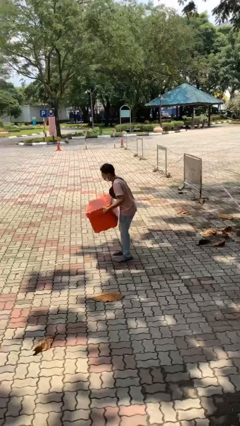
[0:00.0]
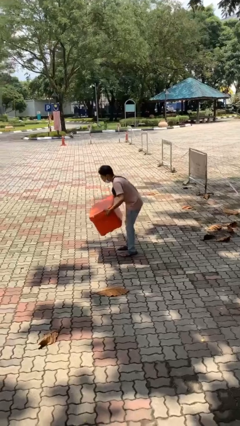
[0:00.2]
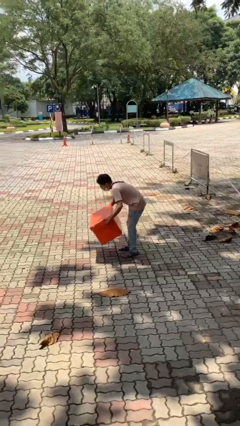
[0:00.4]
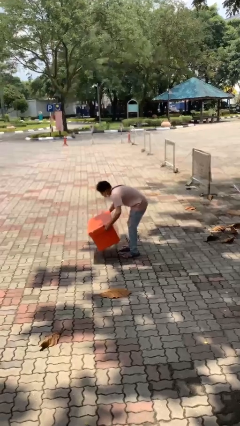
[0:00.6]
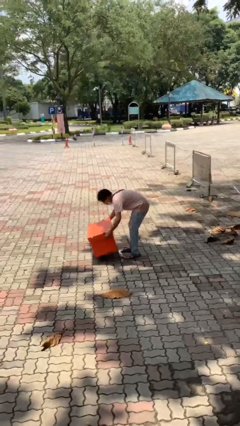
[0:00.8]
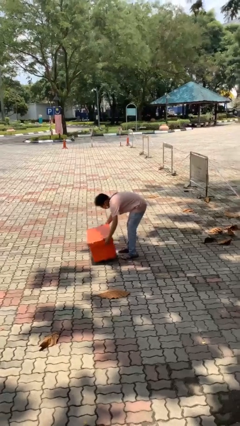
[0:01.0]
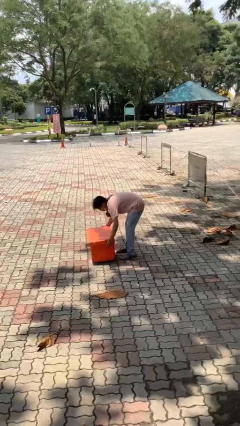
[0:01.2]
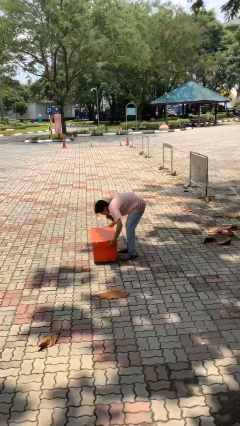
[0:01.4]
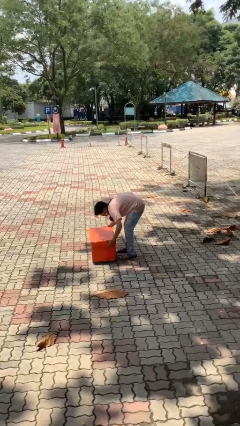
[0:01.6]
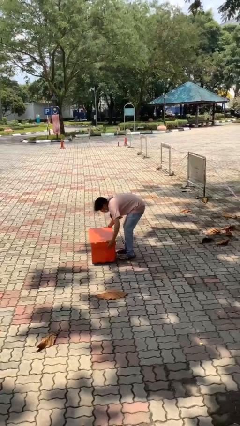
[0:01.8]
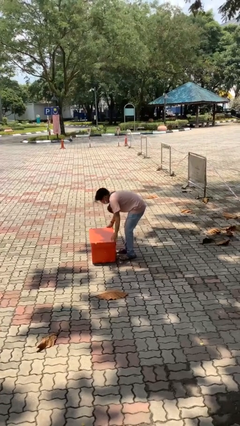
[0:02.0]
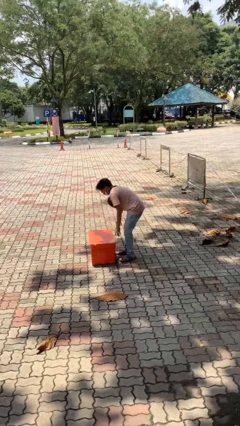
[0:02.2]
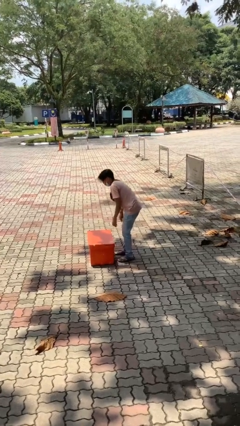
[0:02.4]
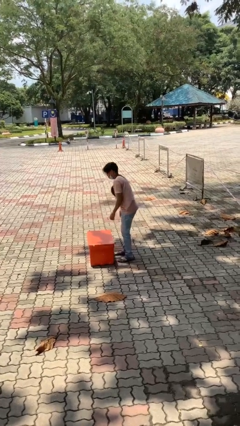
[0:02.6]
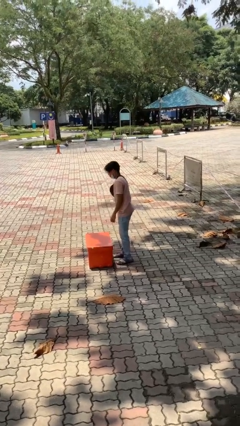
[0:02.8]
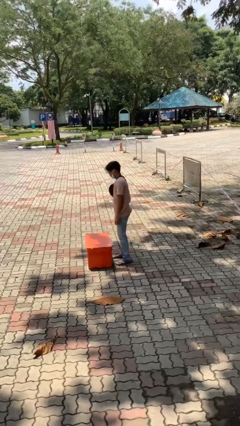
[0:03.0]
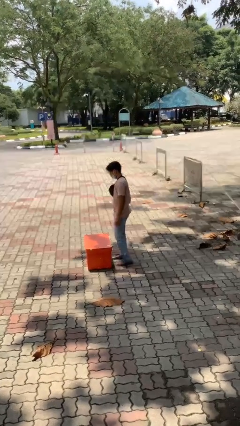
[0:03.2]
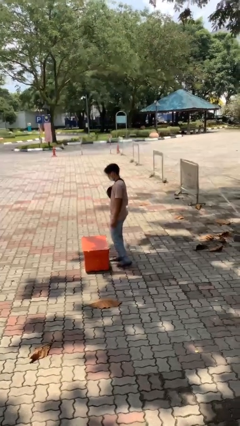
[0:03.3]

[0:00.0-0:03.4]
person puts down object on floor

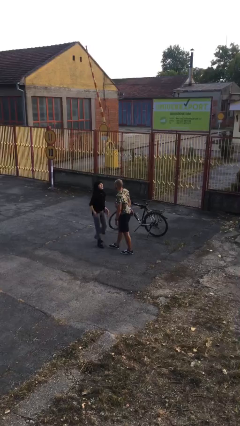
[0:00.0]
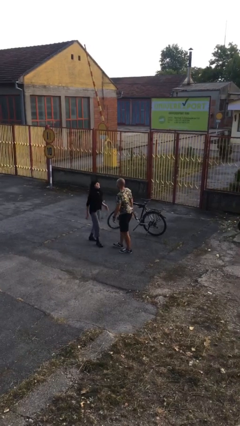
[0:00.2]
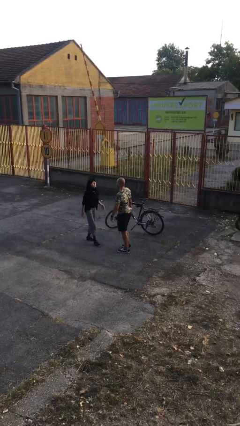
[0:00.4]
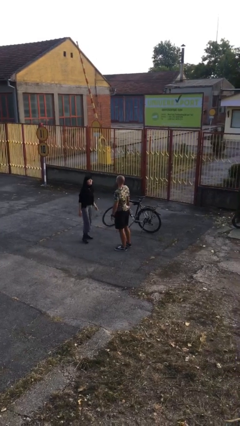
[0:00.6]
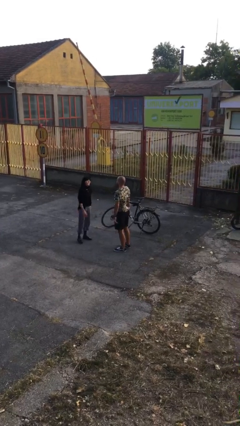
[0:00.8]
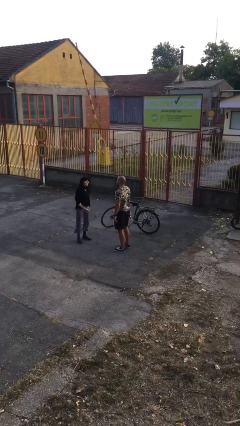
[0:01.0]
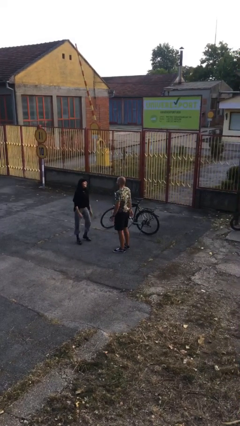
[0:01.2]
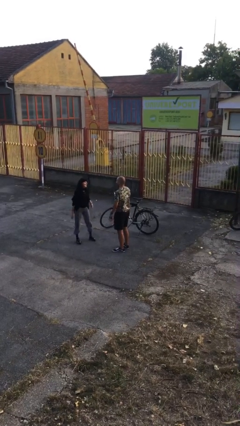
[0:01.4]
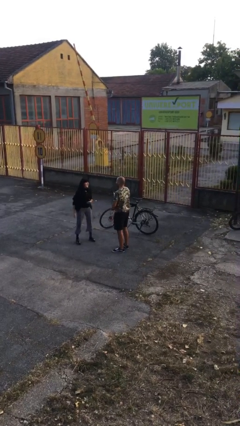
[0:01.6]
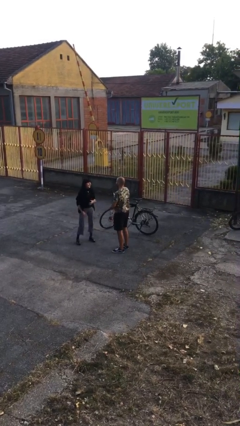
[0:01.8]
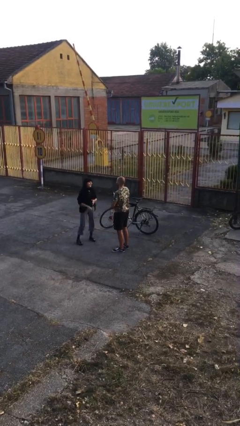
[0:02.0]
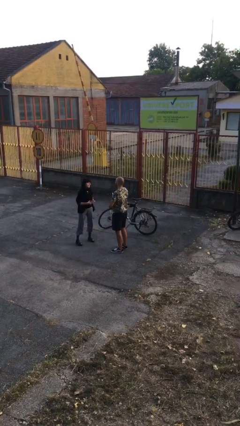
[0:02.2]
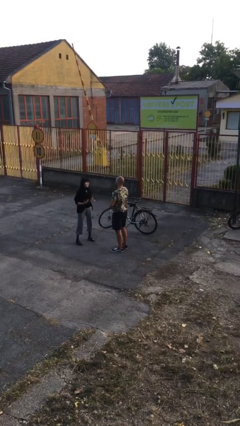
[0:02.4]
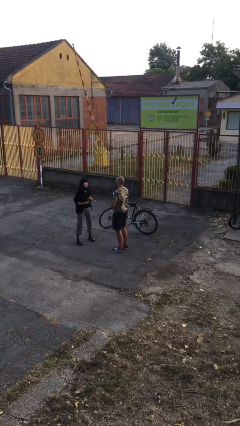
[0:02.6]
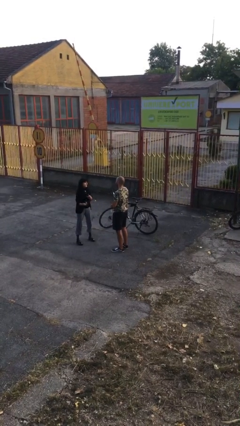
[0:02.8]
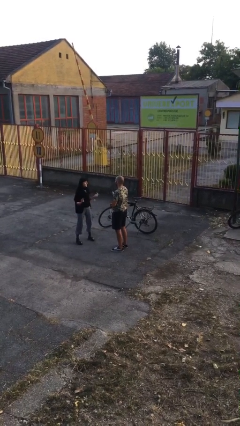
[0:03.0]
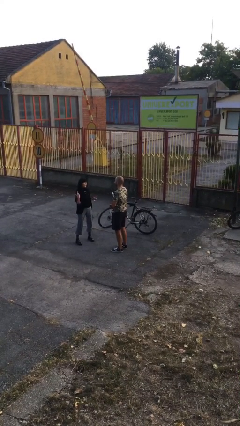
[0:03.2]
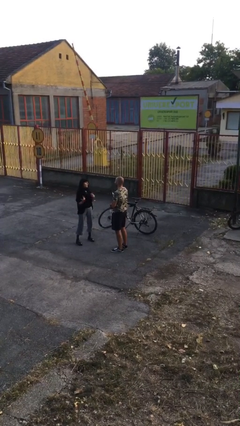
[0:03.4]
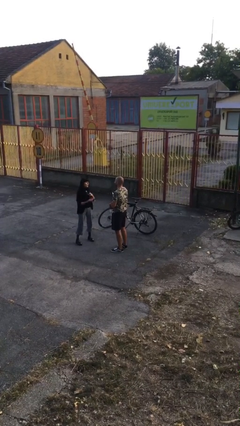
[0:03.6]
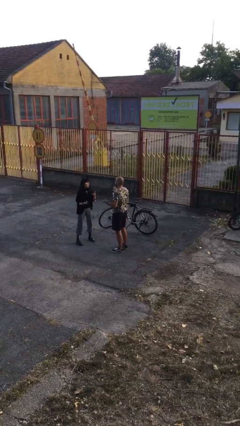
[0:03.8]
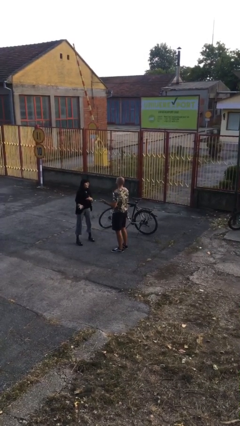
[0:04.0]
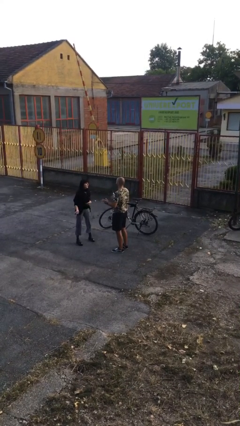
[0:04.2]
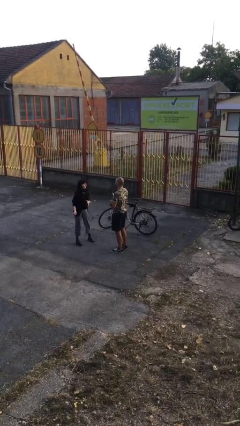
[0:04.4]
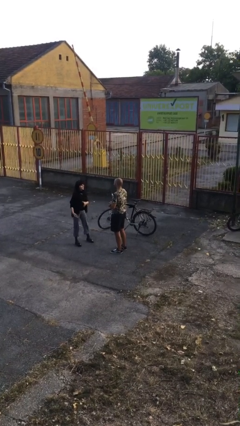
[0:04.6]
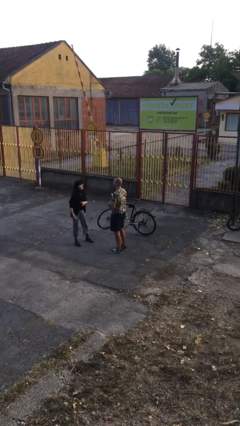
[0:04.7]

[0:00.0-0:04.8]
person talks to person

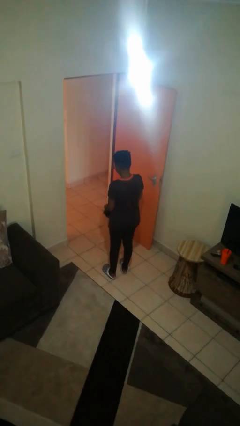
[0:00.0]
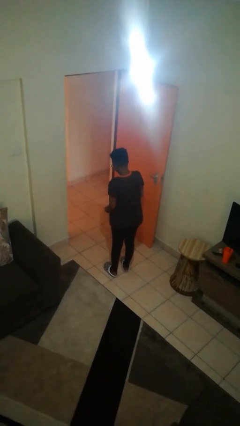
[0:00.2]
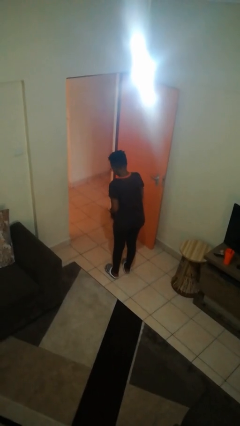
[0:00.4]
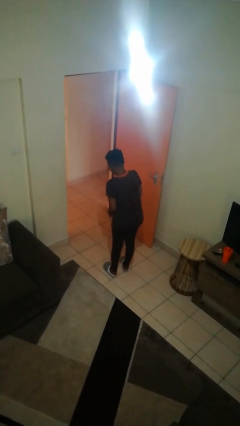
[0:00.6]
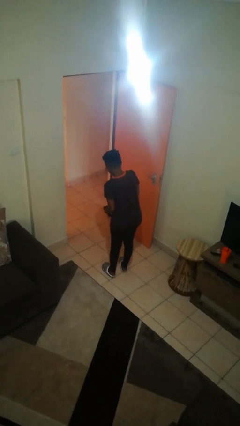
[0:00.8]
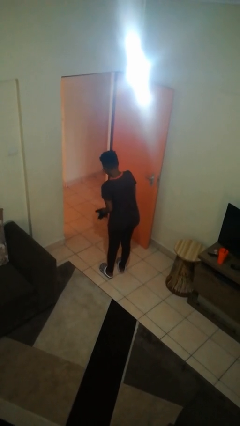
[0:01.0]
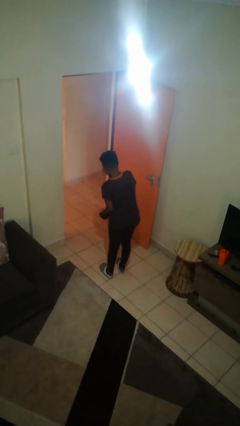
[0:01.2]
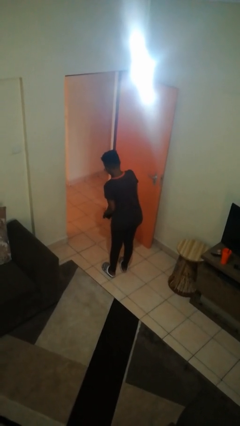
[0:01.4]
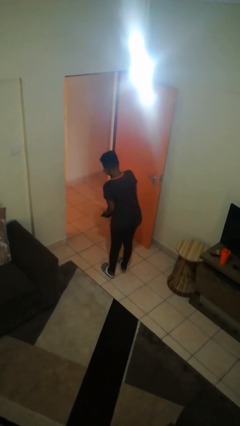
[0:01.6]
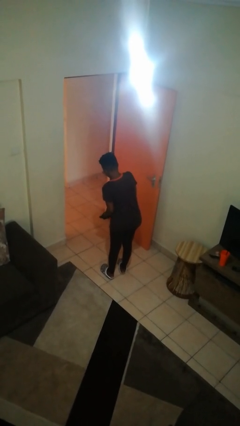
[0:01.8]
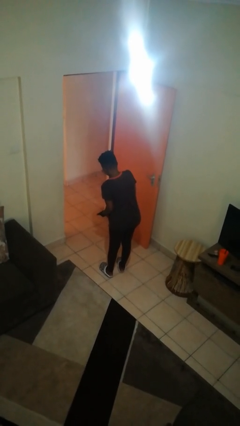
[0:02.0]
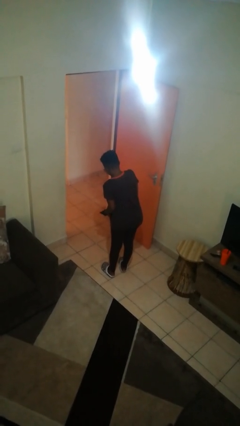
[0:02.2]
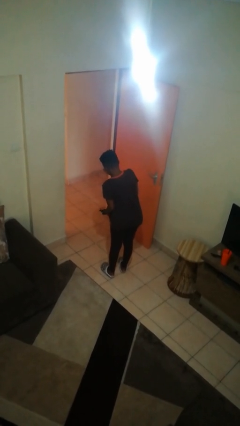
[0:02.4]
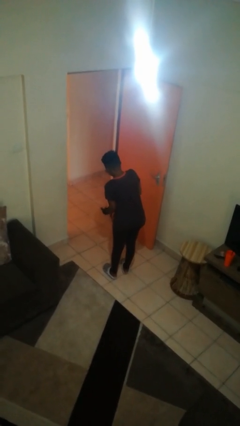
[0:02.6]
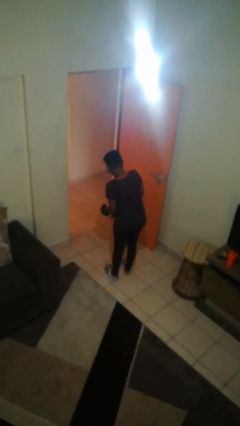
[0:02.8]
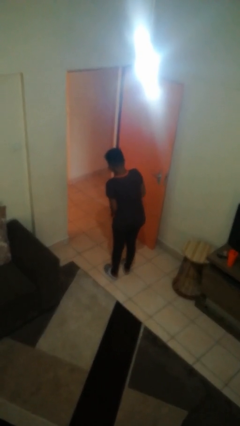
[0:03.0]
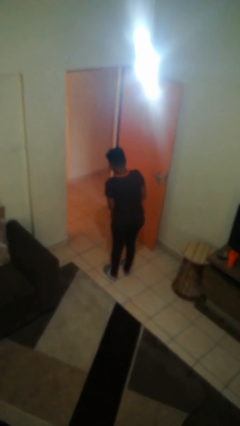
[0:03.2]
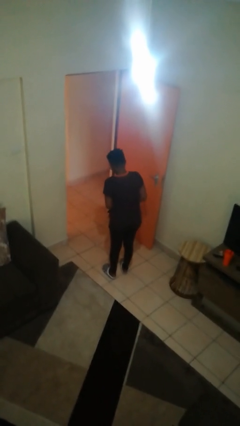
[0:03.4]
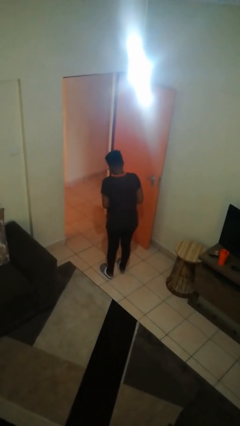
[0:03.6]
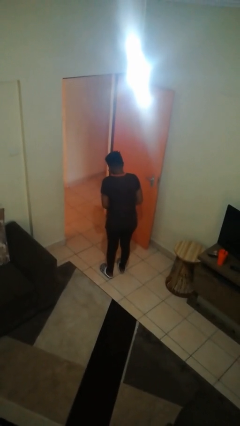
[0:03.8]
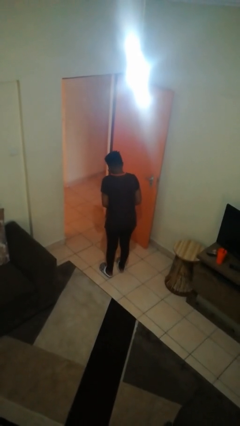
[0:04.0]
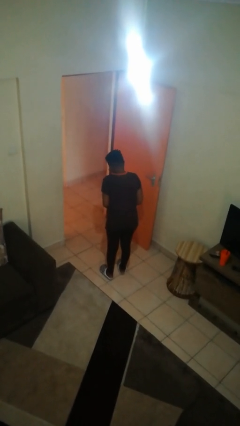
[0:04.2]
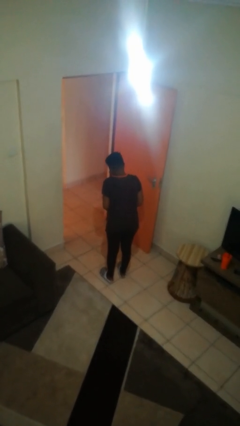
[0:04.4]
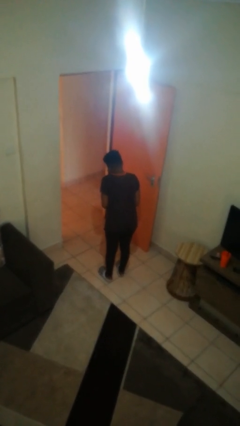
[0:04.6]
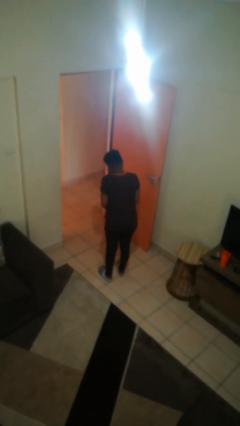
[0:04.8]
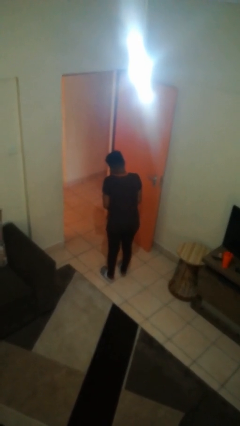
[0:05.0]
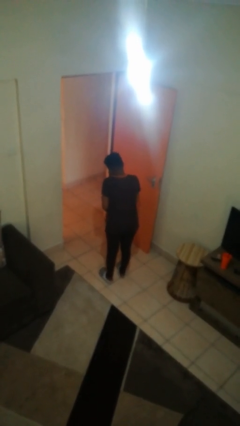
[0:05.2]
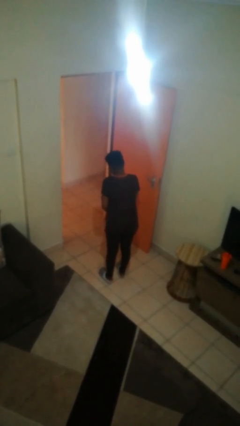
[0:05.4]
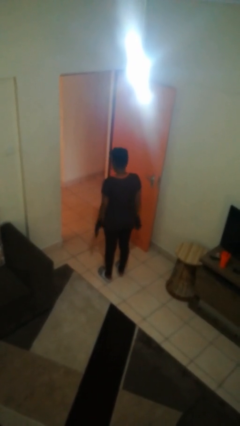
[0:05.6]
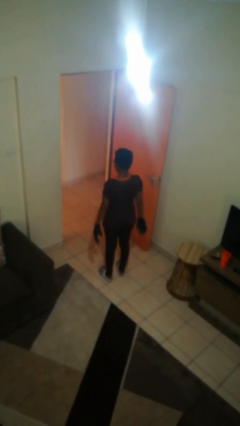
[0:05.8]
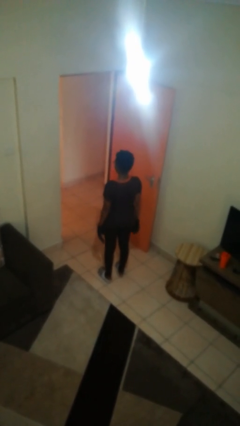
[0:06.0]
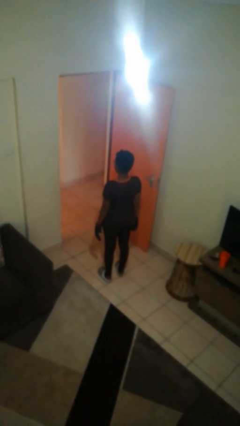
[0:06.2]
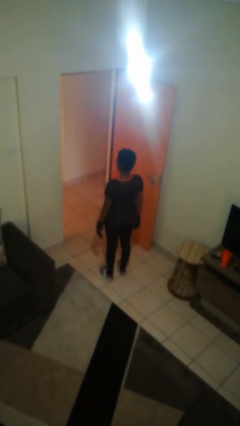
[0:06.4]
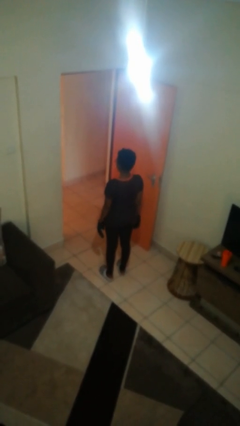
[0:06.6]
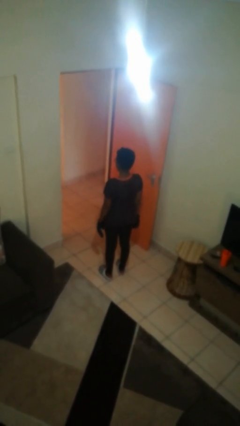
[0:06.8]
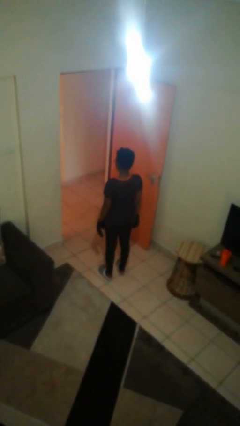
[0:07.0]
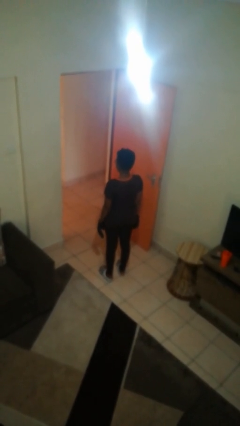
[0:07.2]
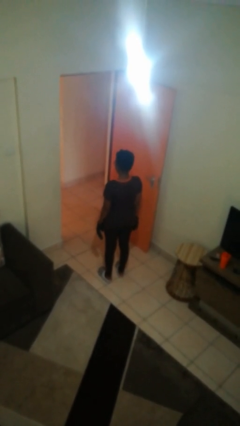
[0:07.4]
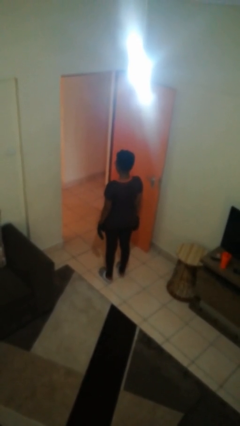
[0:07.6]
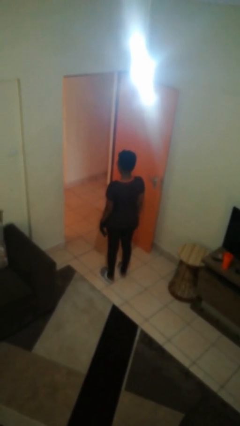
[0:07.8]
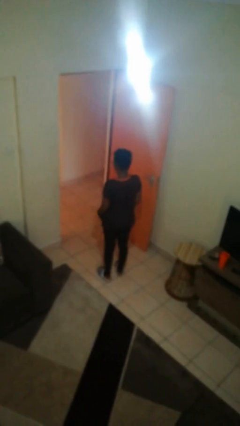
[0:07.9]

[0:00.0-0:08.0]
person puts on gloves

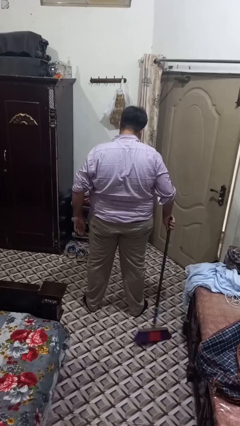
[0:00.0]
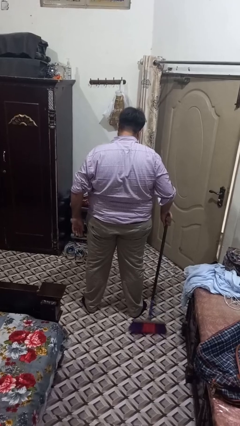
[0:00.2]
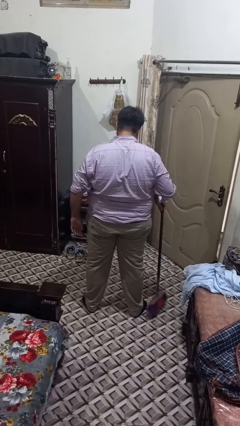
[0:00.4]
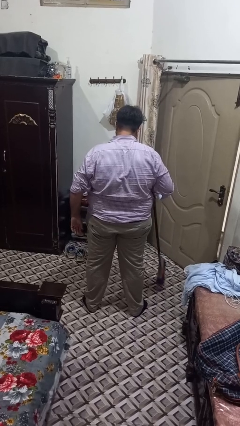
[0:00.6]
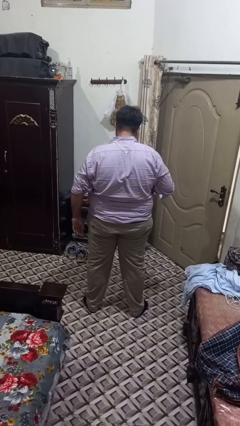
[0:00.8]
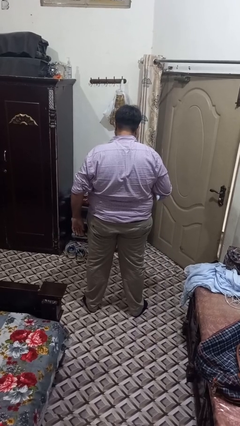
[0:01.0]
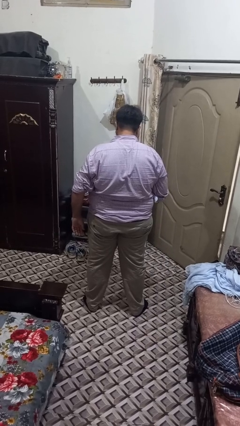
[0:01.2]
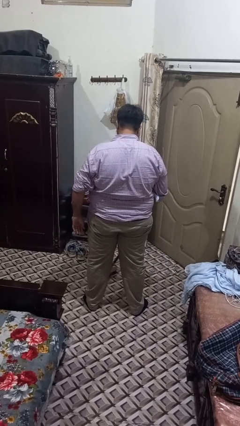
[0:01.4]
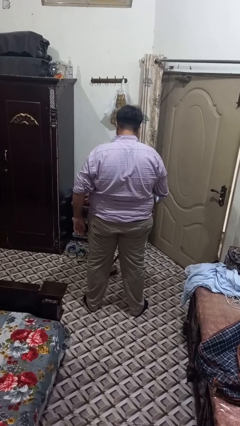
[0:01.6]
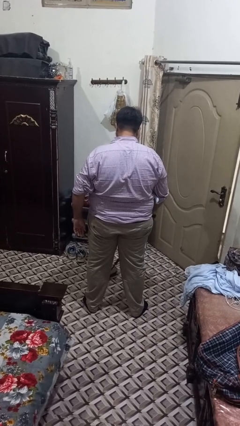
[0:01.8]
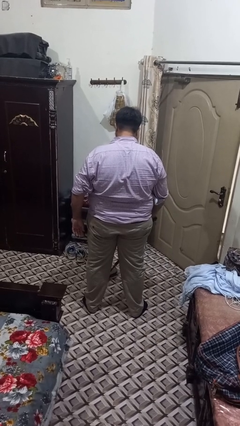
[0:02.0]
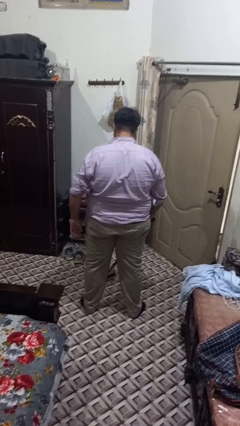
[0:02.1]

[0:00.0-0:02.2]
person sweeps floor
